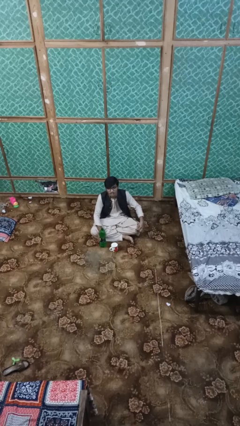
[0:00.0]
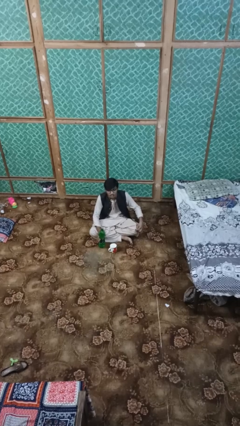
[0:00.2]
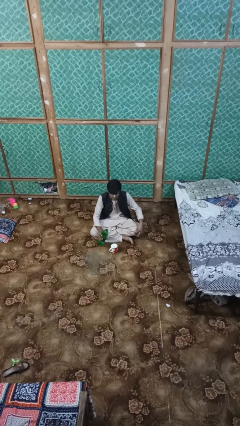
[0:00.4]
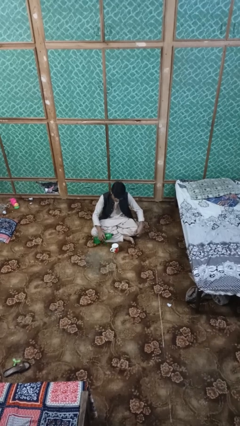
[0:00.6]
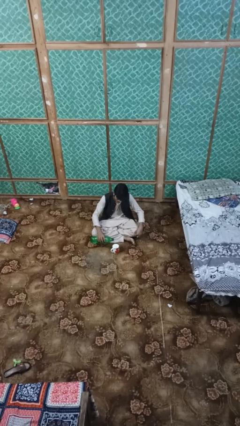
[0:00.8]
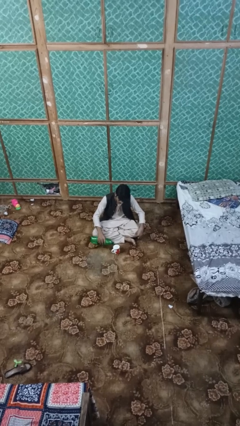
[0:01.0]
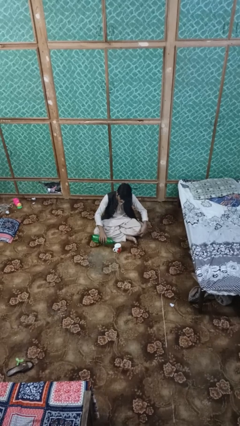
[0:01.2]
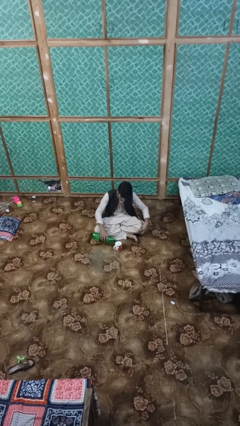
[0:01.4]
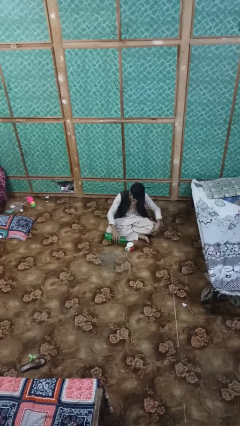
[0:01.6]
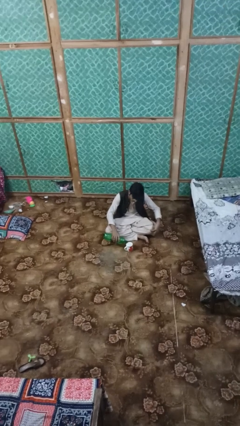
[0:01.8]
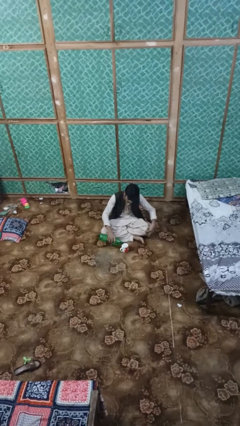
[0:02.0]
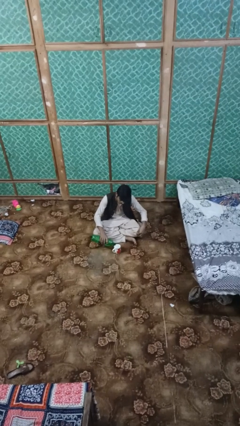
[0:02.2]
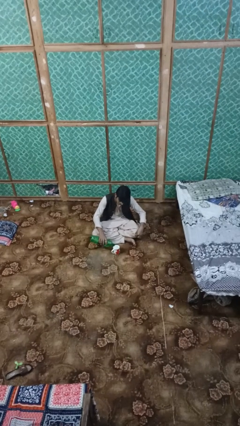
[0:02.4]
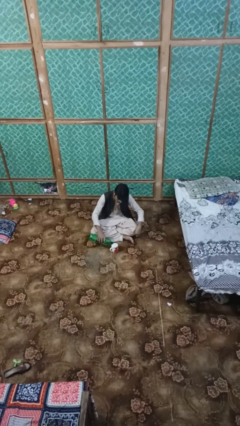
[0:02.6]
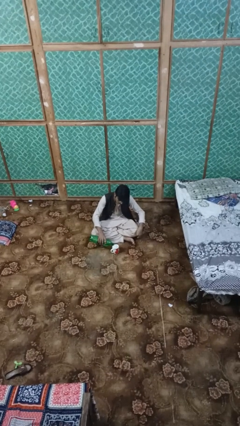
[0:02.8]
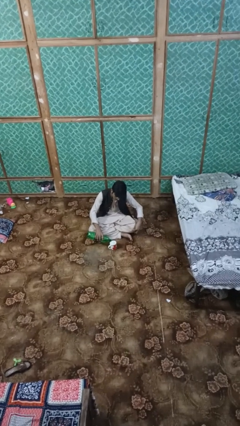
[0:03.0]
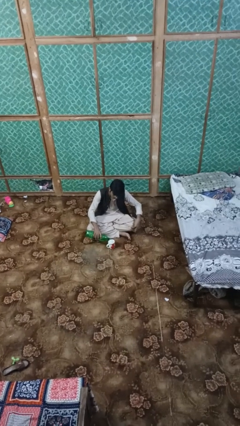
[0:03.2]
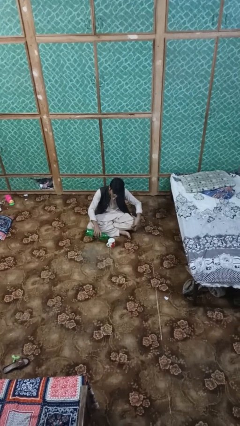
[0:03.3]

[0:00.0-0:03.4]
person pours liquid into cup

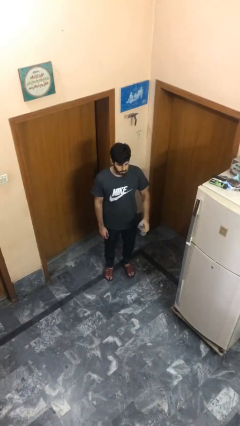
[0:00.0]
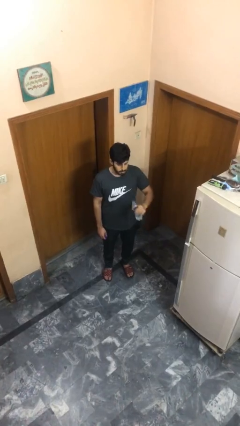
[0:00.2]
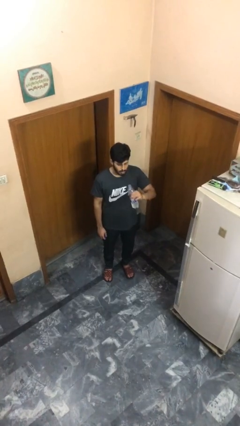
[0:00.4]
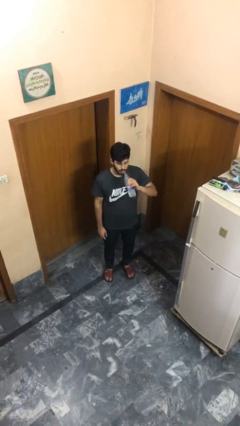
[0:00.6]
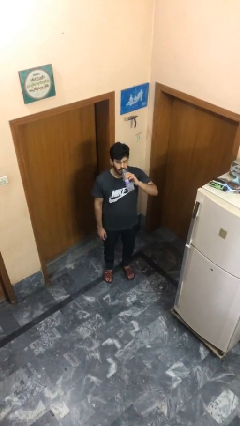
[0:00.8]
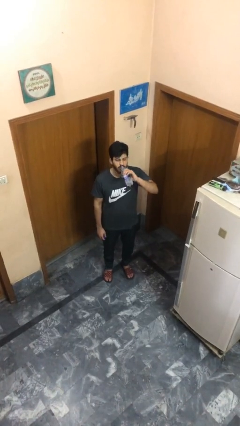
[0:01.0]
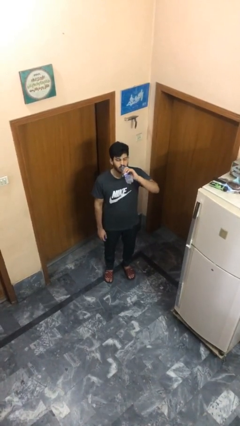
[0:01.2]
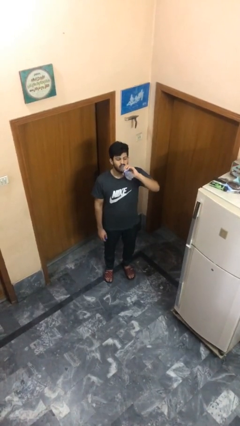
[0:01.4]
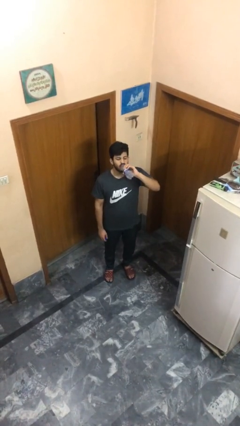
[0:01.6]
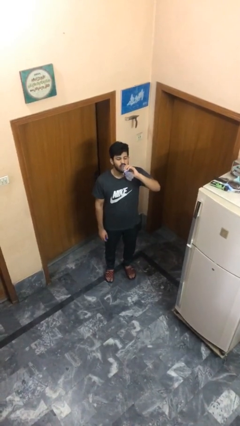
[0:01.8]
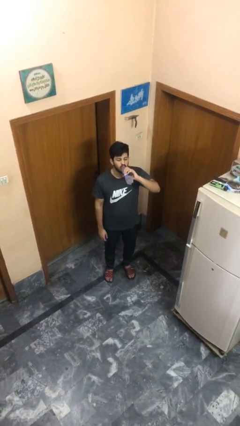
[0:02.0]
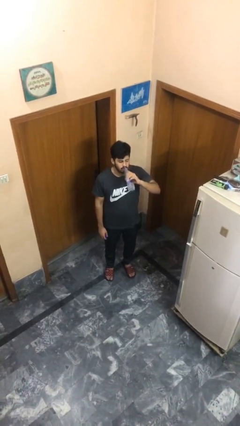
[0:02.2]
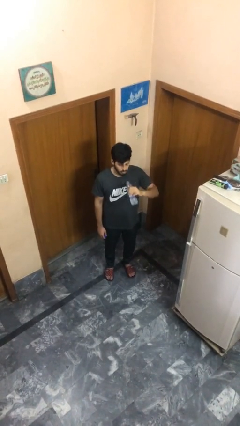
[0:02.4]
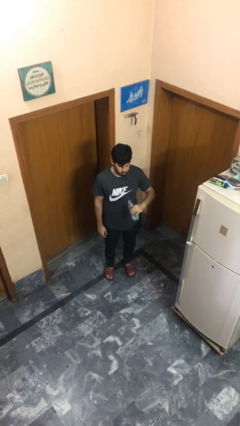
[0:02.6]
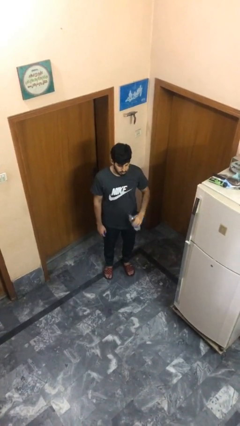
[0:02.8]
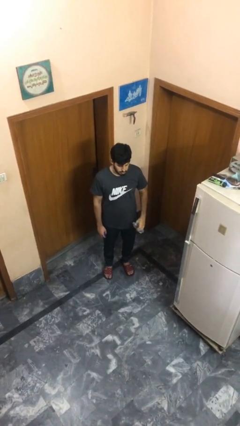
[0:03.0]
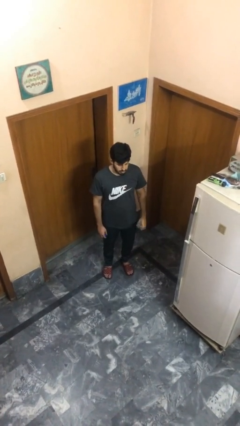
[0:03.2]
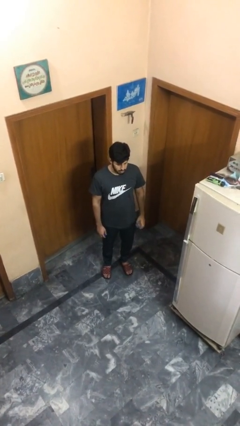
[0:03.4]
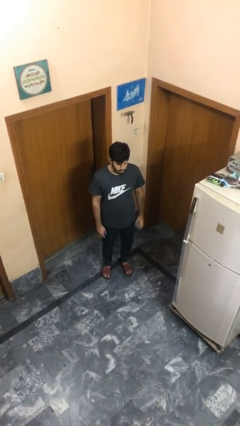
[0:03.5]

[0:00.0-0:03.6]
person drinks from bottle

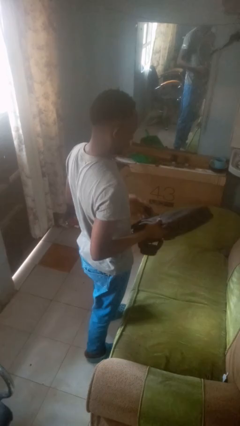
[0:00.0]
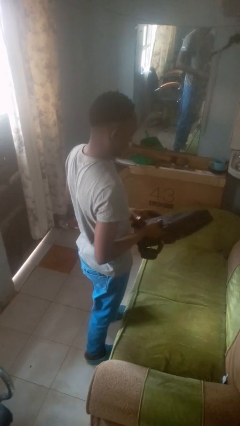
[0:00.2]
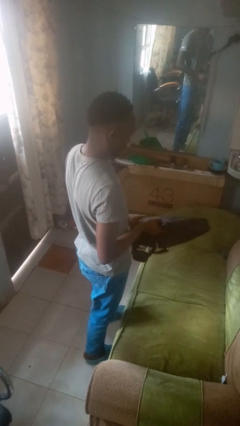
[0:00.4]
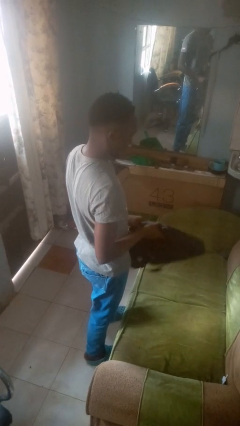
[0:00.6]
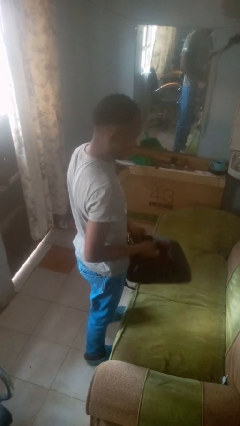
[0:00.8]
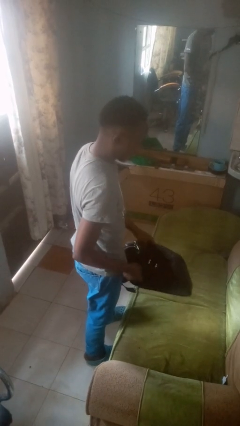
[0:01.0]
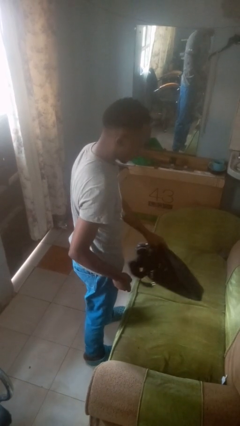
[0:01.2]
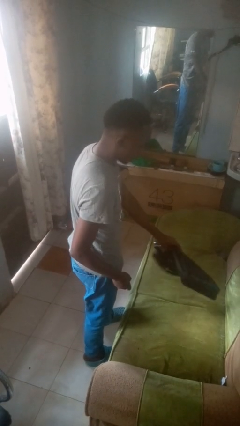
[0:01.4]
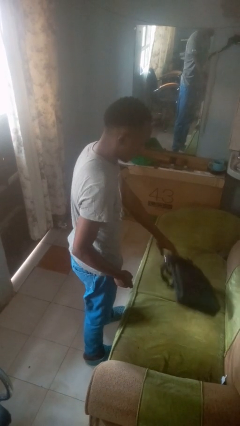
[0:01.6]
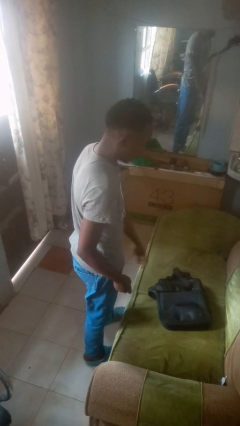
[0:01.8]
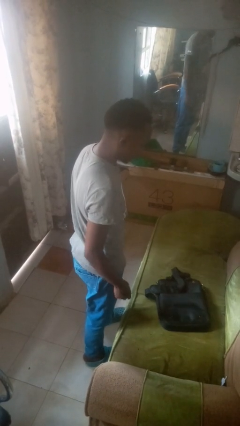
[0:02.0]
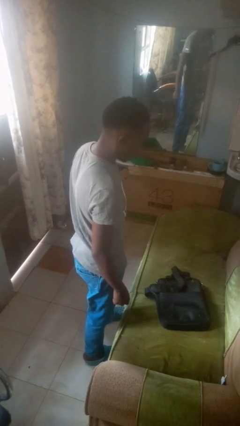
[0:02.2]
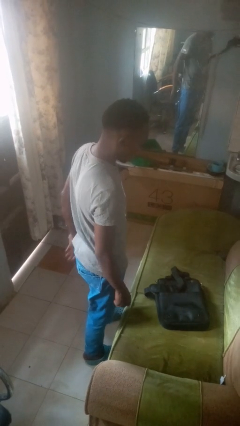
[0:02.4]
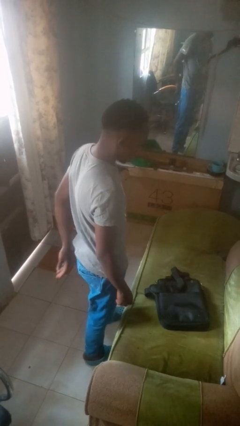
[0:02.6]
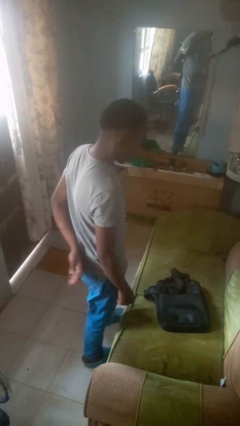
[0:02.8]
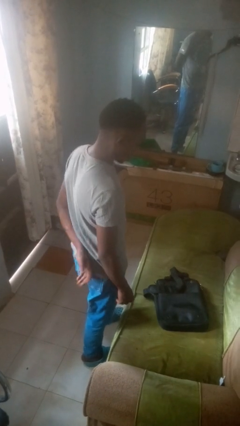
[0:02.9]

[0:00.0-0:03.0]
person puts down object on couch

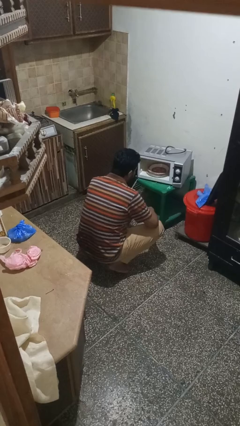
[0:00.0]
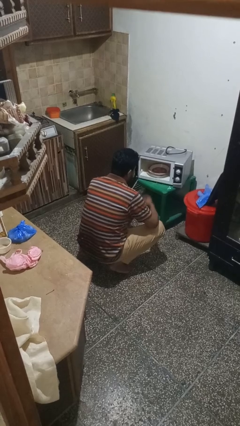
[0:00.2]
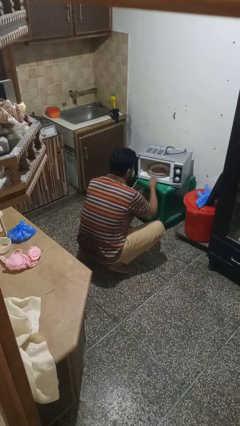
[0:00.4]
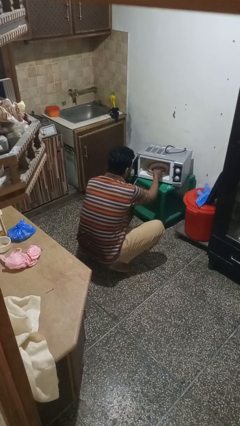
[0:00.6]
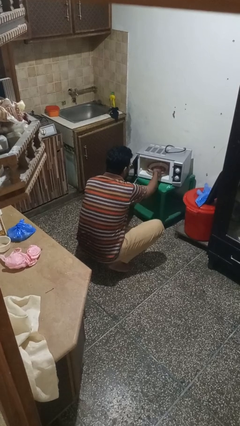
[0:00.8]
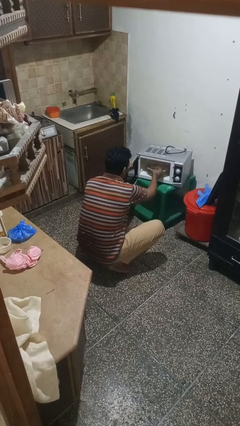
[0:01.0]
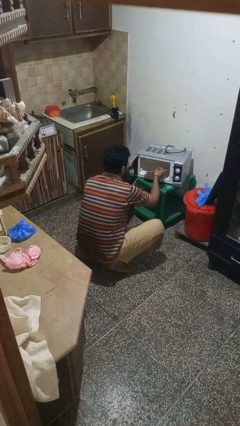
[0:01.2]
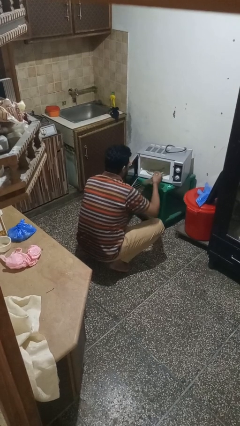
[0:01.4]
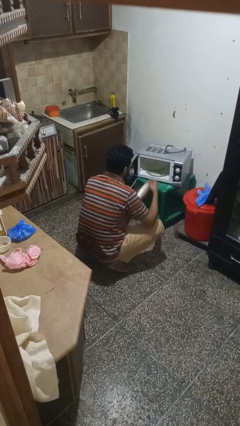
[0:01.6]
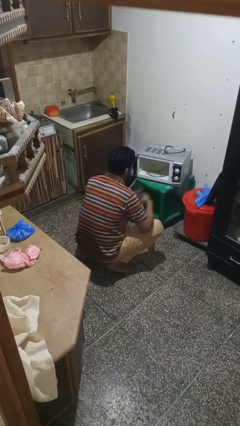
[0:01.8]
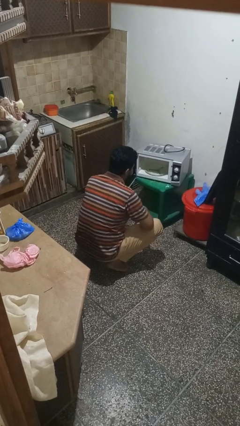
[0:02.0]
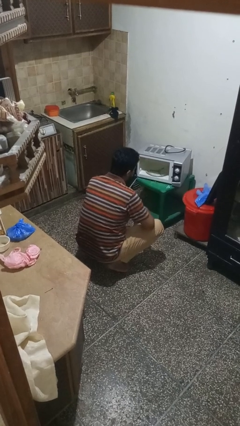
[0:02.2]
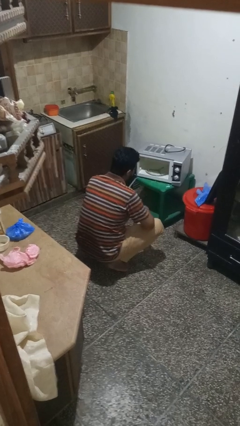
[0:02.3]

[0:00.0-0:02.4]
person takes object from microwave

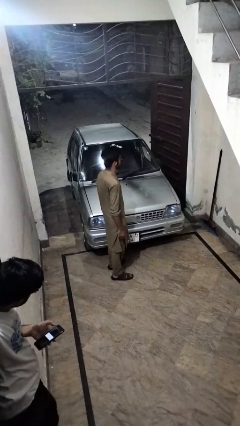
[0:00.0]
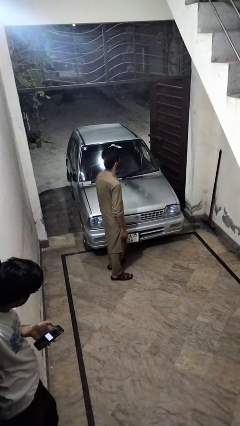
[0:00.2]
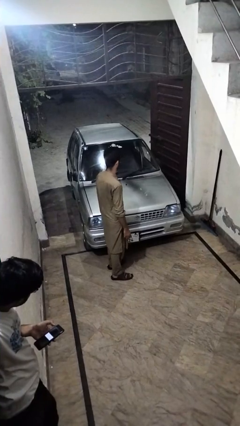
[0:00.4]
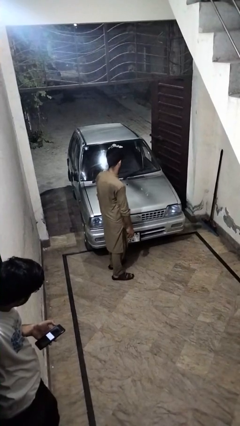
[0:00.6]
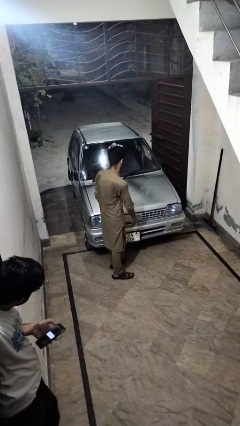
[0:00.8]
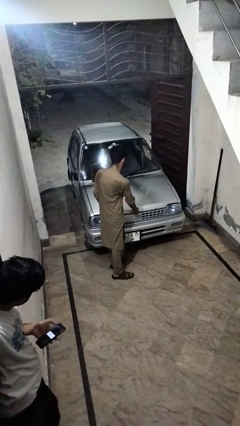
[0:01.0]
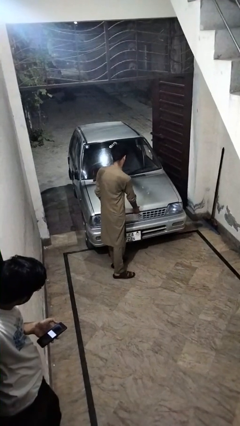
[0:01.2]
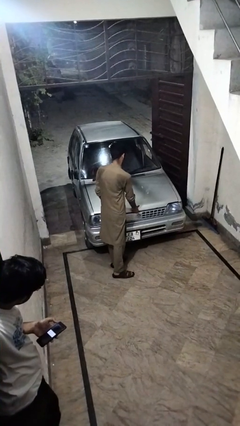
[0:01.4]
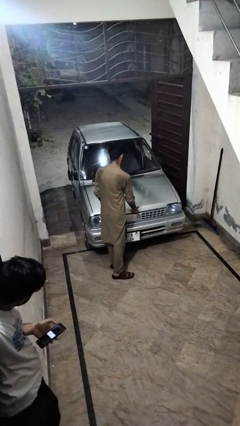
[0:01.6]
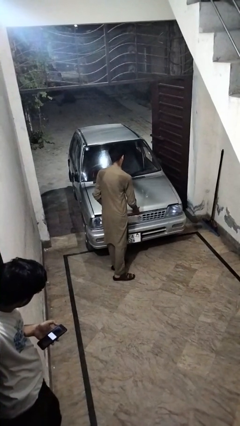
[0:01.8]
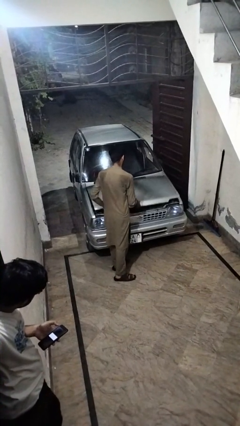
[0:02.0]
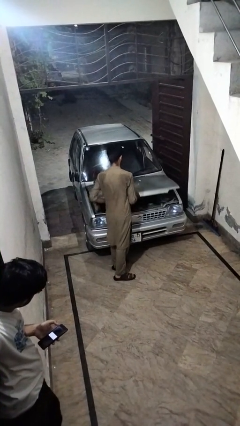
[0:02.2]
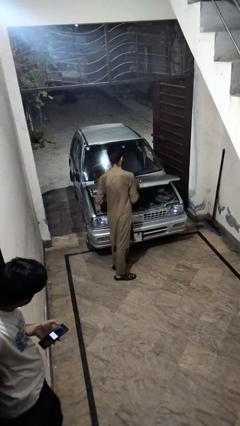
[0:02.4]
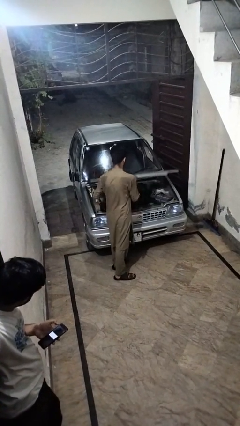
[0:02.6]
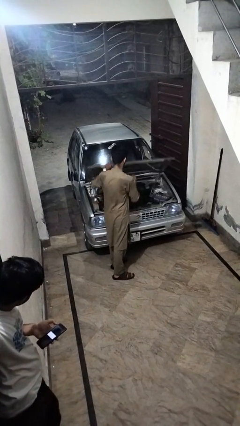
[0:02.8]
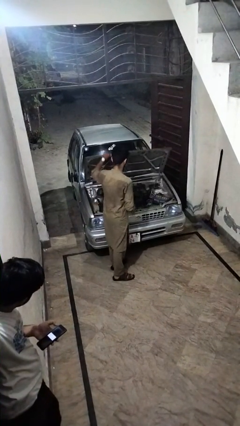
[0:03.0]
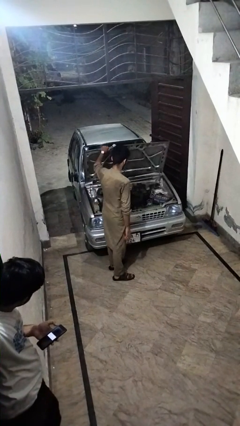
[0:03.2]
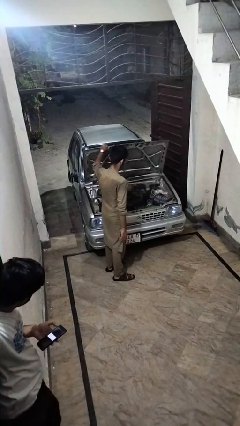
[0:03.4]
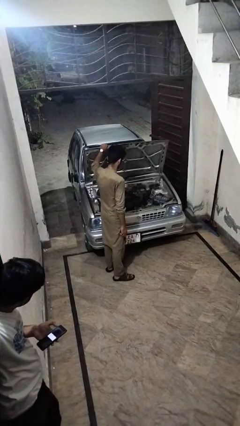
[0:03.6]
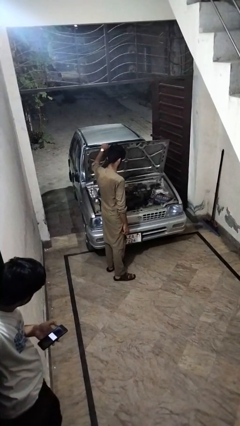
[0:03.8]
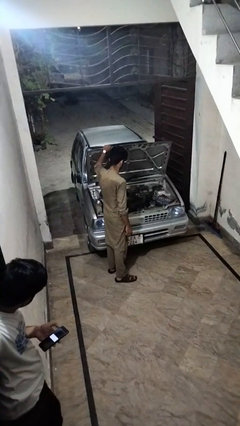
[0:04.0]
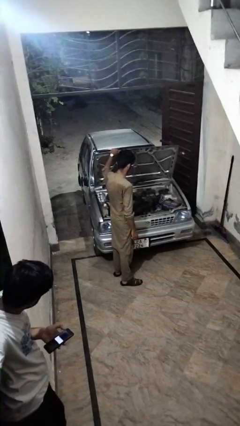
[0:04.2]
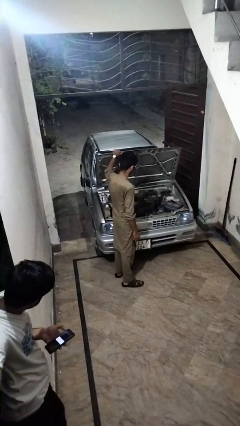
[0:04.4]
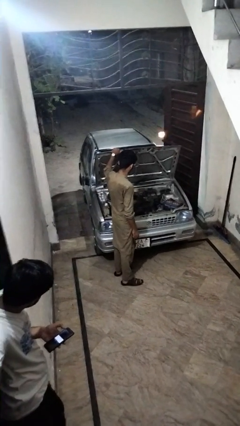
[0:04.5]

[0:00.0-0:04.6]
person opens car hood

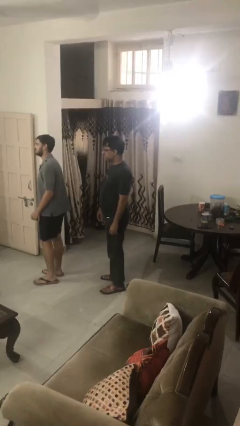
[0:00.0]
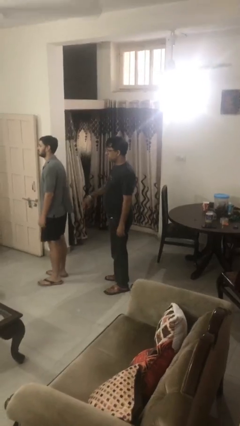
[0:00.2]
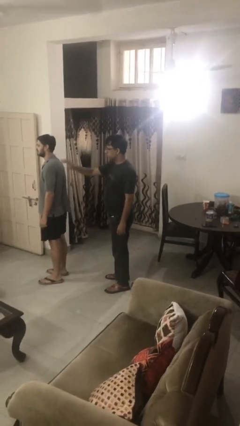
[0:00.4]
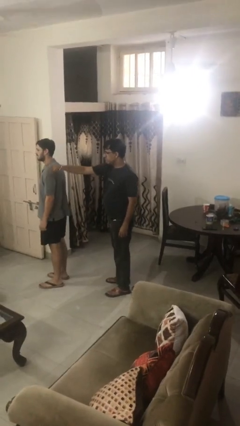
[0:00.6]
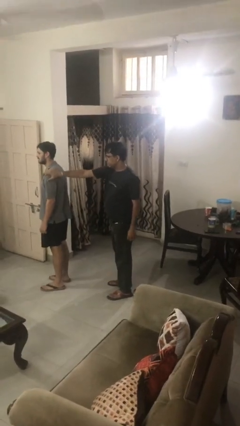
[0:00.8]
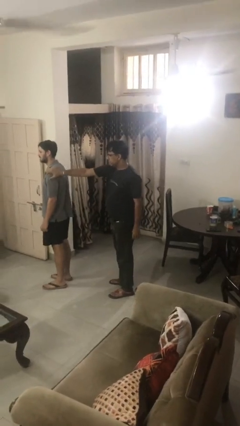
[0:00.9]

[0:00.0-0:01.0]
person grabs person by shoulder
